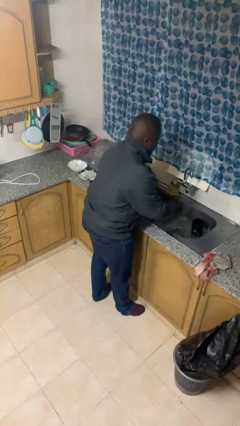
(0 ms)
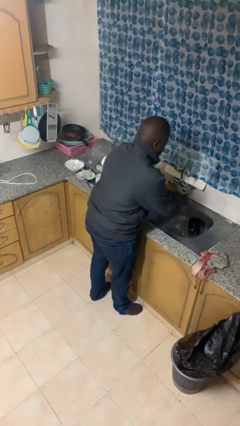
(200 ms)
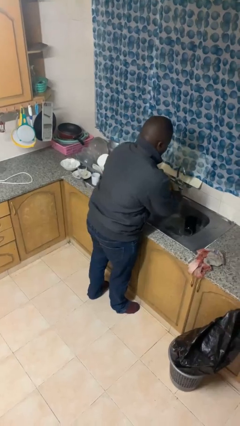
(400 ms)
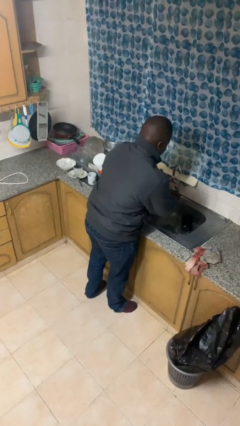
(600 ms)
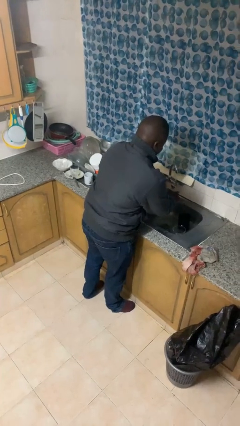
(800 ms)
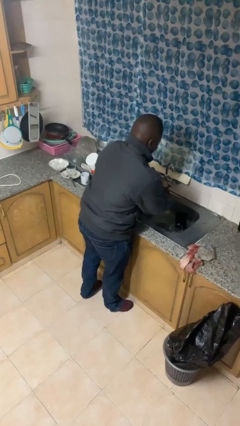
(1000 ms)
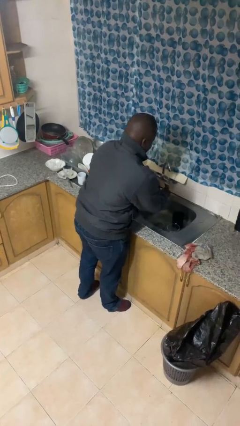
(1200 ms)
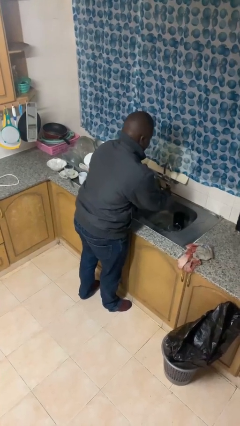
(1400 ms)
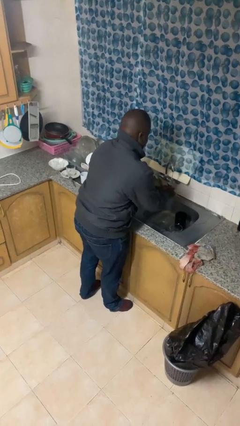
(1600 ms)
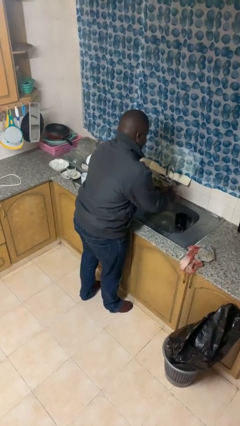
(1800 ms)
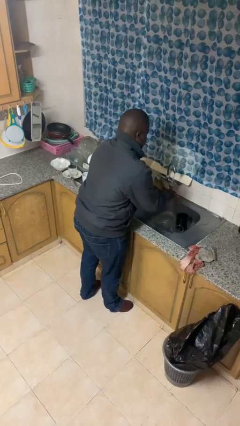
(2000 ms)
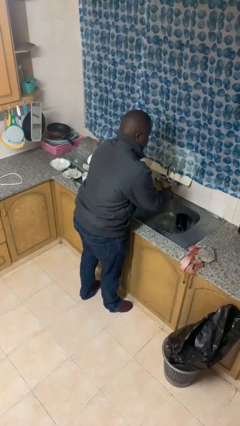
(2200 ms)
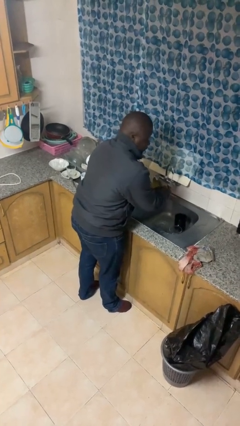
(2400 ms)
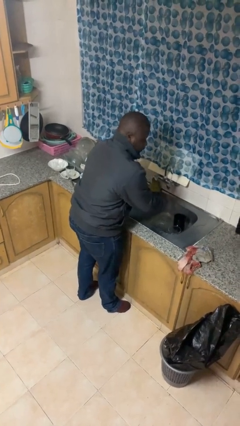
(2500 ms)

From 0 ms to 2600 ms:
person washes hands

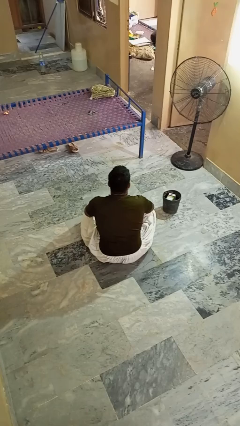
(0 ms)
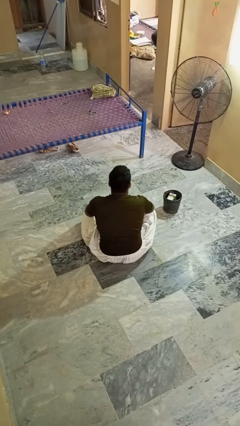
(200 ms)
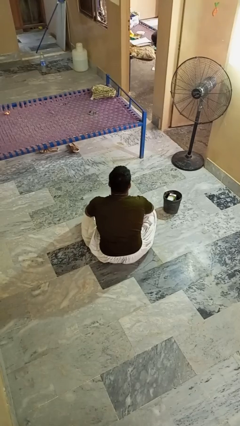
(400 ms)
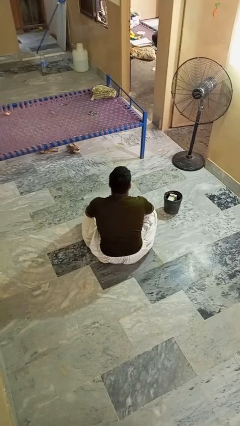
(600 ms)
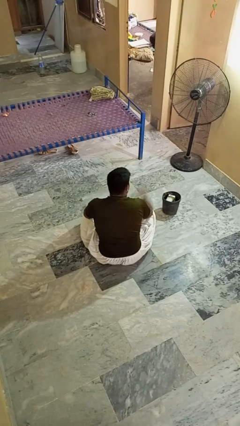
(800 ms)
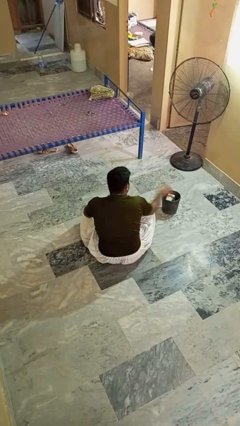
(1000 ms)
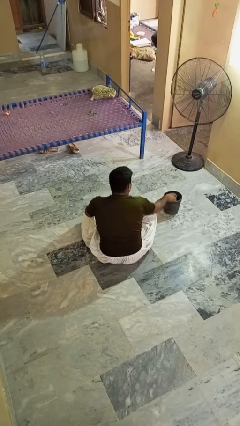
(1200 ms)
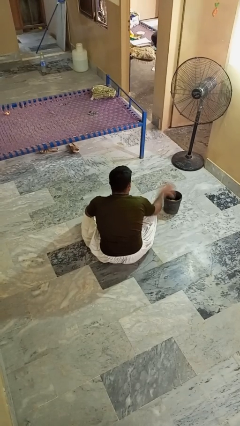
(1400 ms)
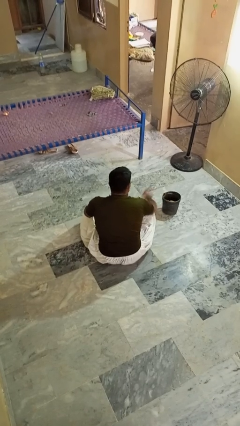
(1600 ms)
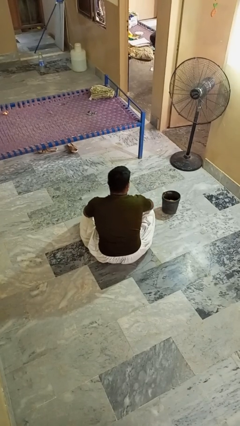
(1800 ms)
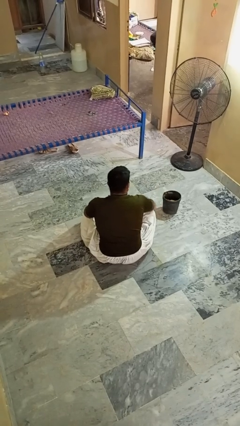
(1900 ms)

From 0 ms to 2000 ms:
person takes object from basket

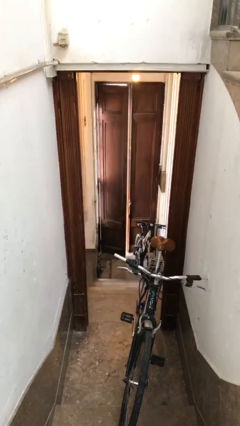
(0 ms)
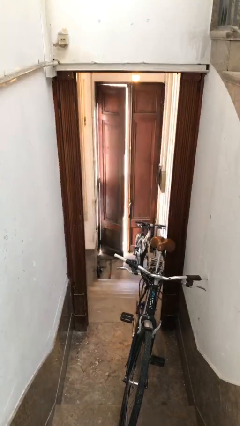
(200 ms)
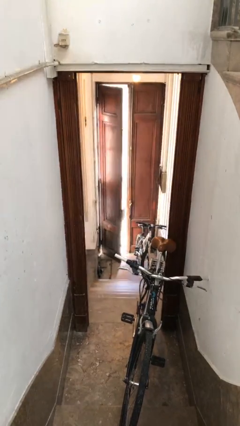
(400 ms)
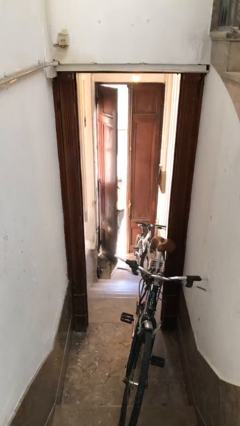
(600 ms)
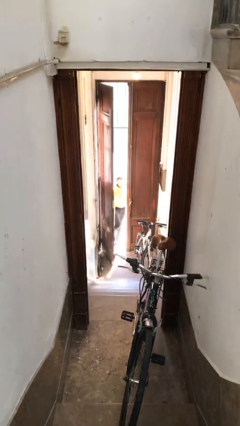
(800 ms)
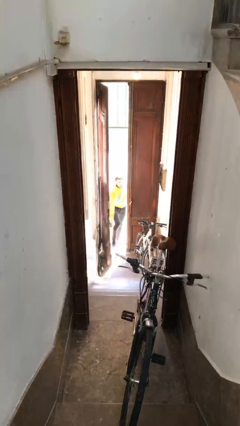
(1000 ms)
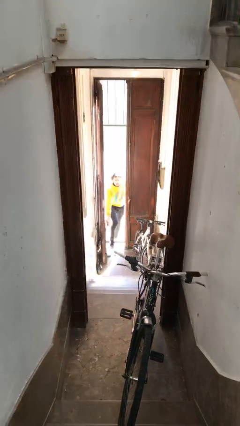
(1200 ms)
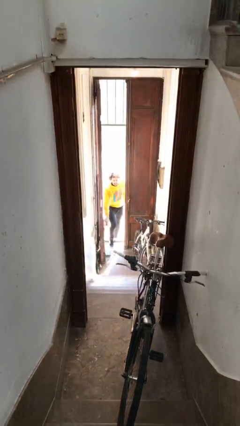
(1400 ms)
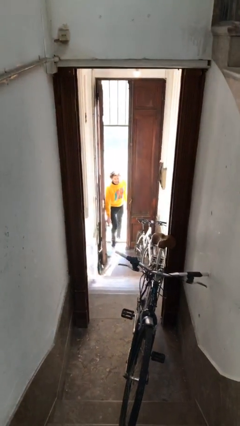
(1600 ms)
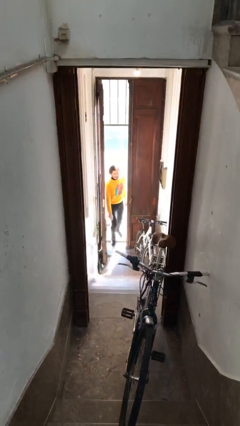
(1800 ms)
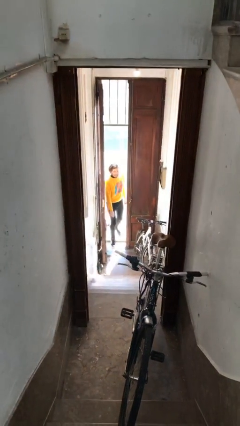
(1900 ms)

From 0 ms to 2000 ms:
person opens facility door

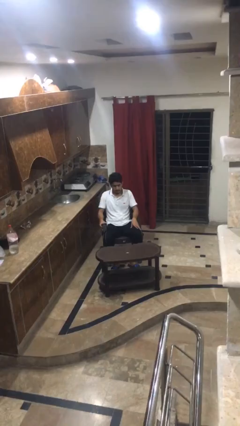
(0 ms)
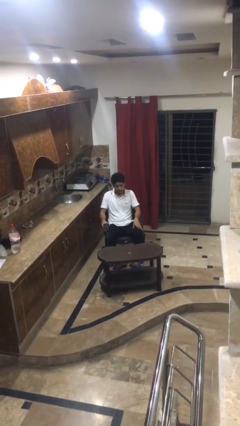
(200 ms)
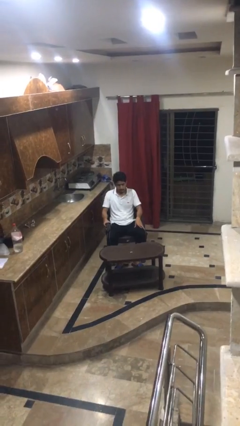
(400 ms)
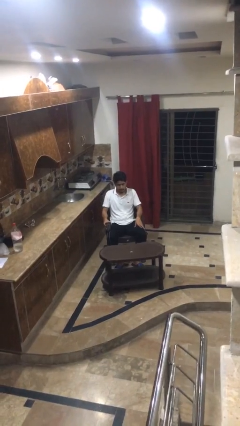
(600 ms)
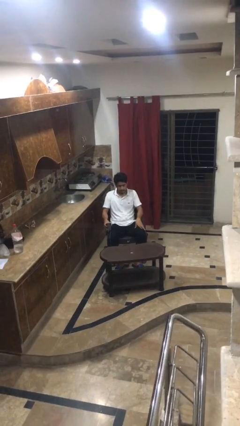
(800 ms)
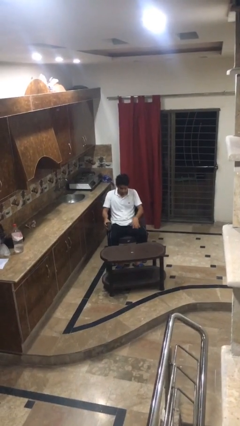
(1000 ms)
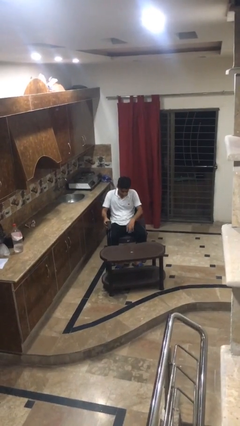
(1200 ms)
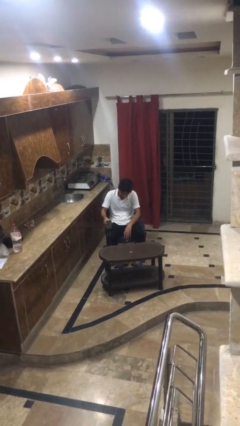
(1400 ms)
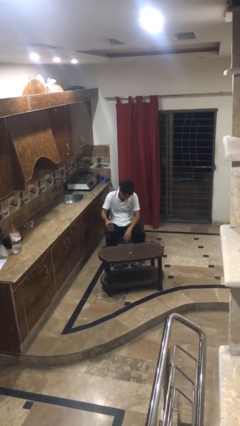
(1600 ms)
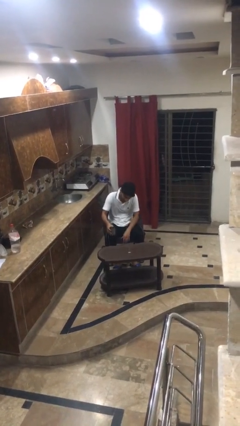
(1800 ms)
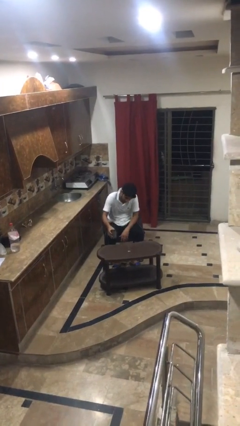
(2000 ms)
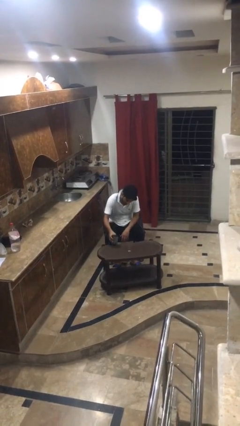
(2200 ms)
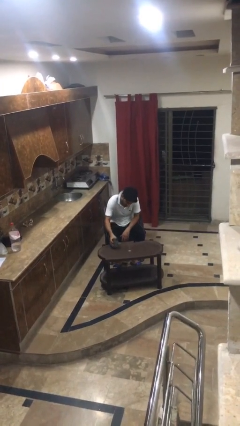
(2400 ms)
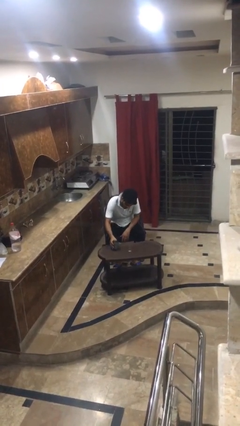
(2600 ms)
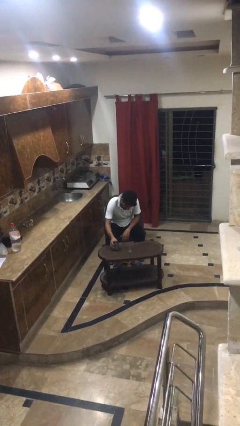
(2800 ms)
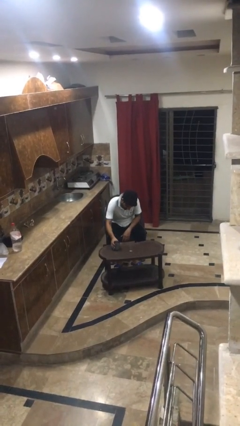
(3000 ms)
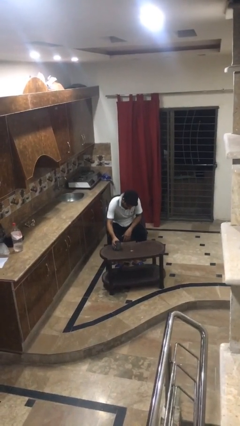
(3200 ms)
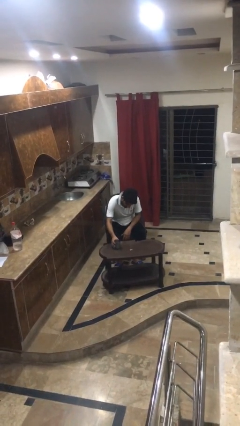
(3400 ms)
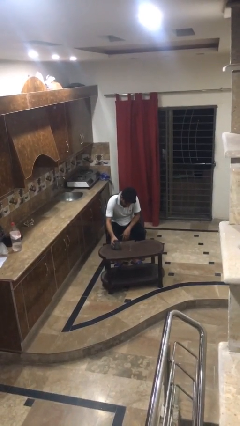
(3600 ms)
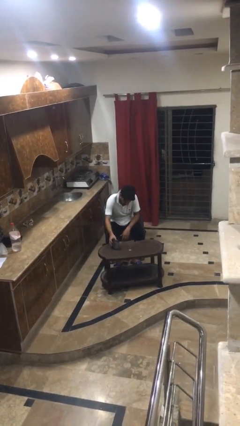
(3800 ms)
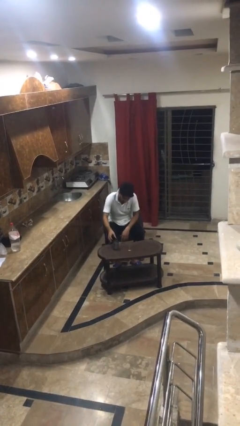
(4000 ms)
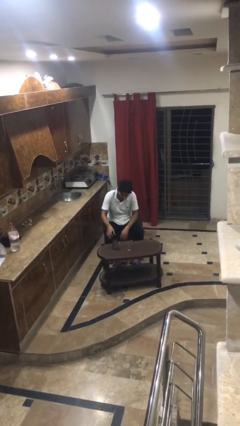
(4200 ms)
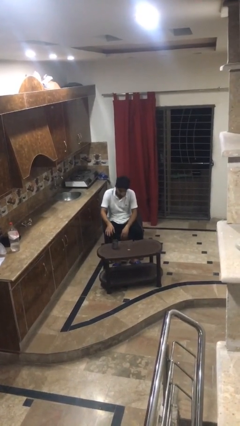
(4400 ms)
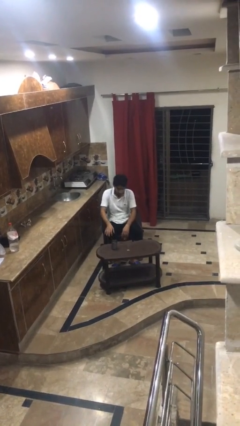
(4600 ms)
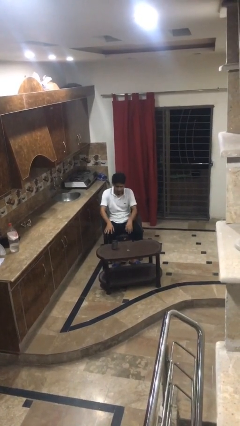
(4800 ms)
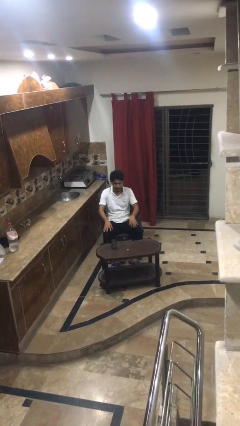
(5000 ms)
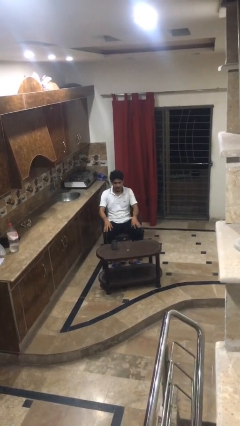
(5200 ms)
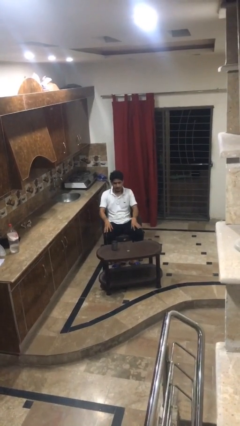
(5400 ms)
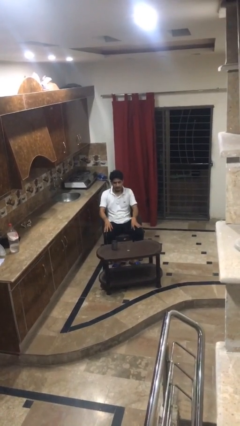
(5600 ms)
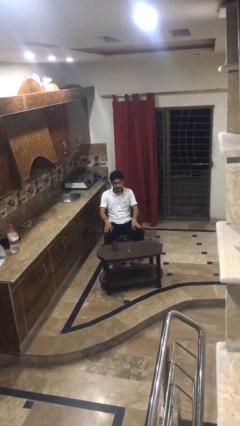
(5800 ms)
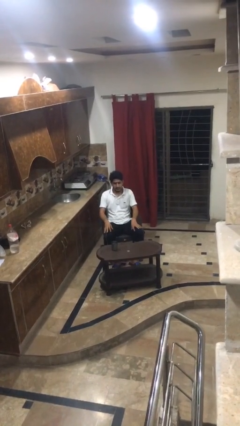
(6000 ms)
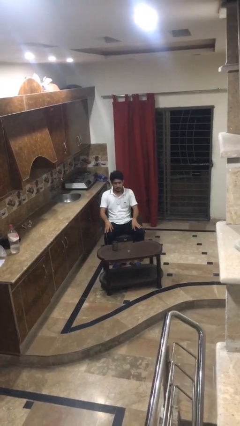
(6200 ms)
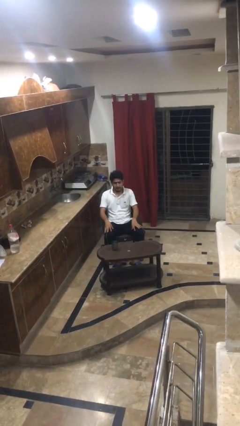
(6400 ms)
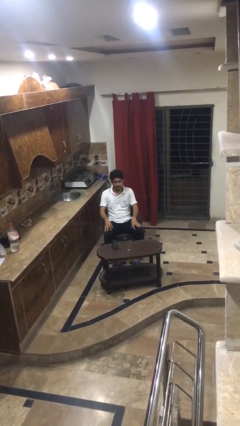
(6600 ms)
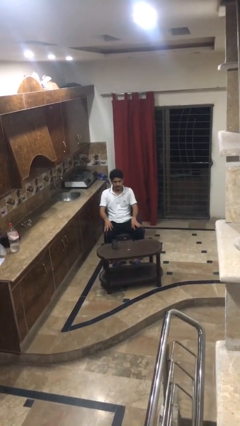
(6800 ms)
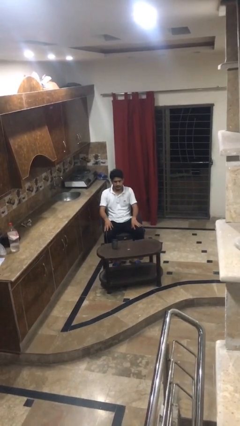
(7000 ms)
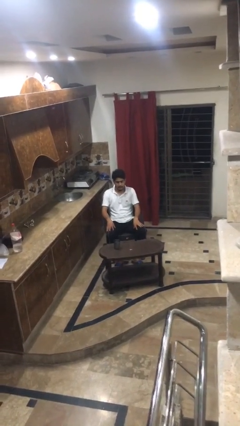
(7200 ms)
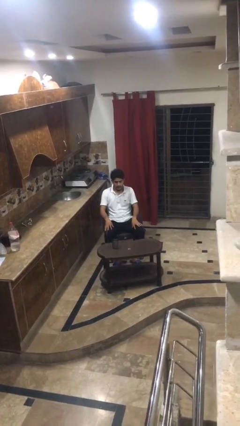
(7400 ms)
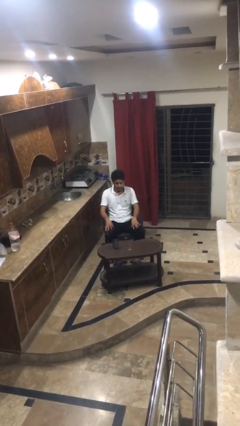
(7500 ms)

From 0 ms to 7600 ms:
person spills on table

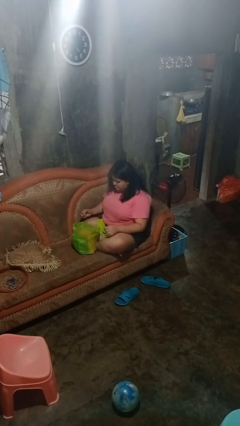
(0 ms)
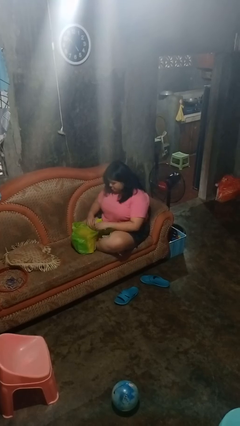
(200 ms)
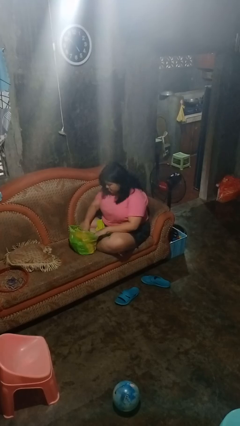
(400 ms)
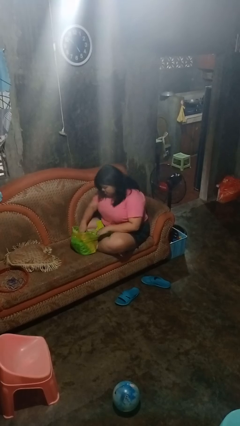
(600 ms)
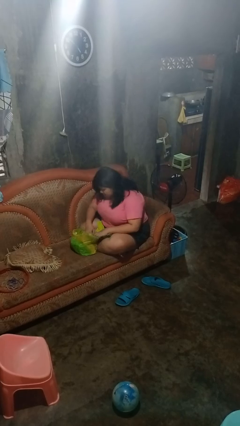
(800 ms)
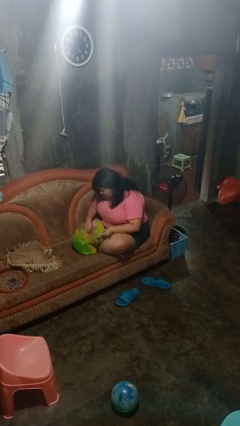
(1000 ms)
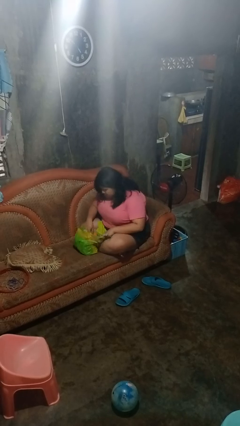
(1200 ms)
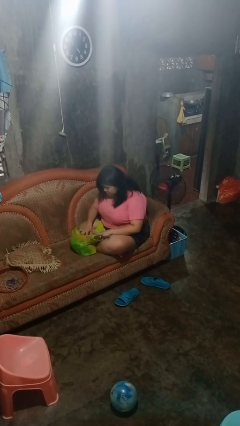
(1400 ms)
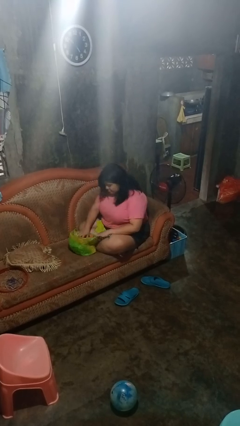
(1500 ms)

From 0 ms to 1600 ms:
person searches in bag

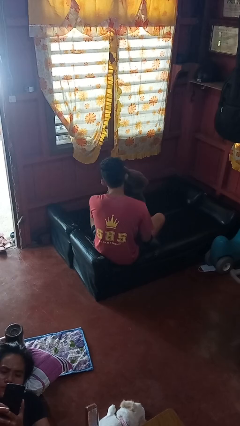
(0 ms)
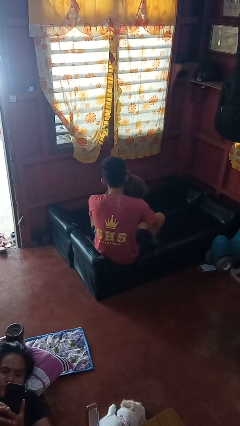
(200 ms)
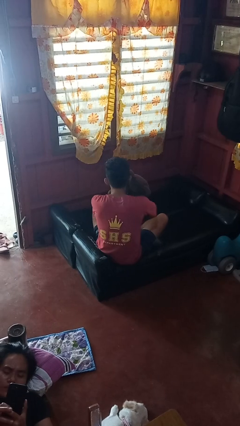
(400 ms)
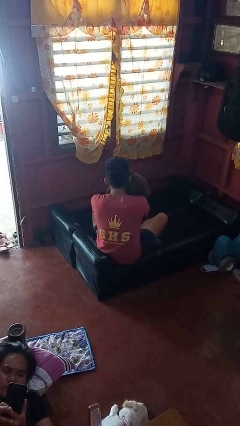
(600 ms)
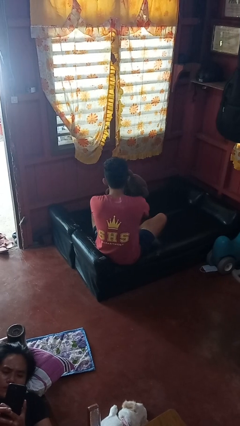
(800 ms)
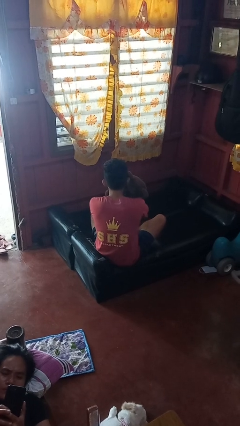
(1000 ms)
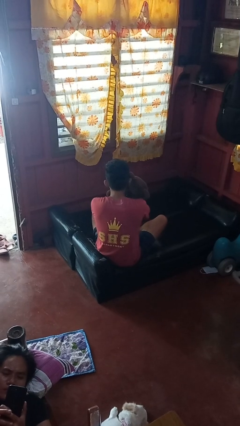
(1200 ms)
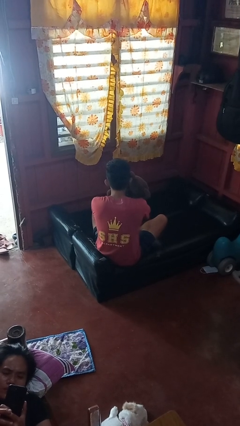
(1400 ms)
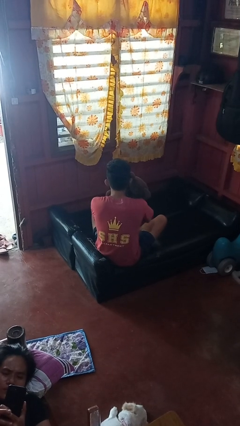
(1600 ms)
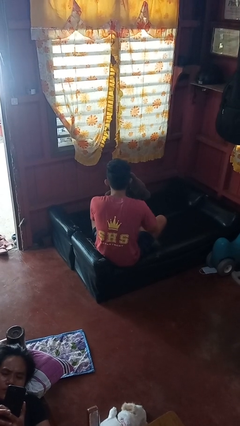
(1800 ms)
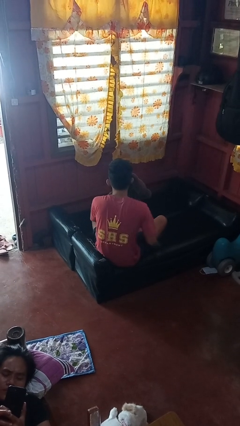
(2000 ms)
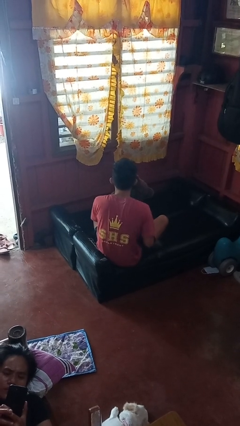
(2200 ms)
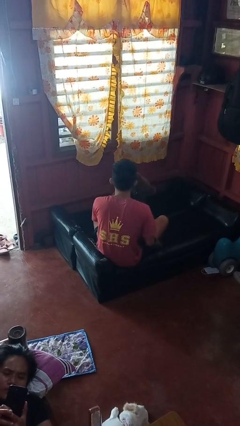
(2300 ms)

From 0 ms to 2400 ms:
person hugs stuffed animal
